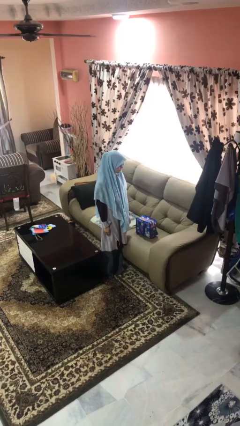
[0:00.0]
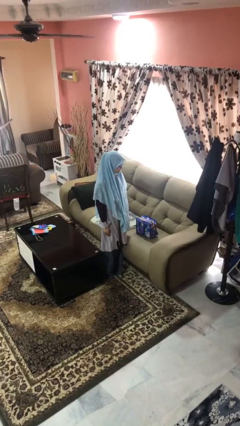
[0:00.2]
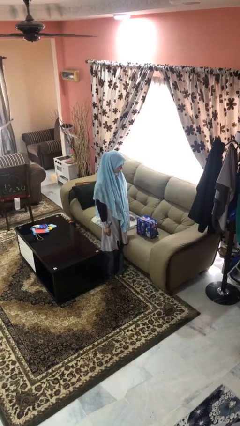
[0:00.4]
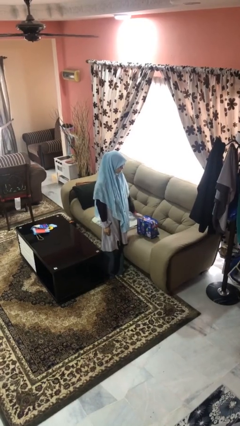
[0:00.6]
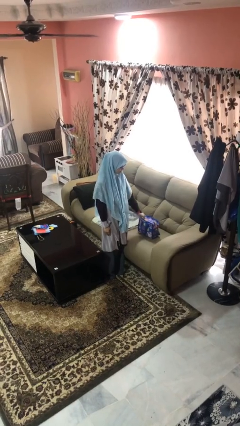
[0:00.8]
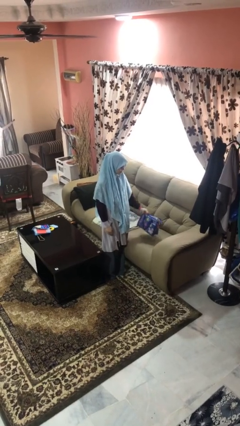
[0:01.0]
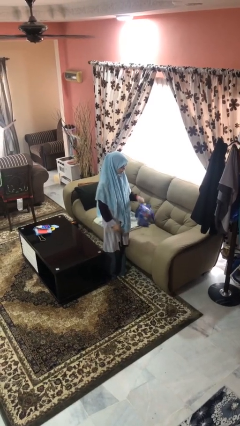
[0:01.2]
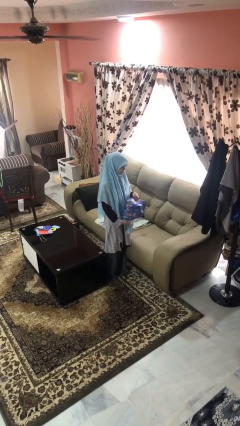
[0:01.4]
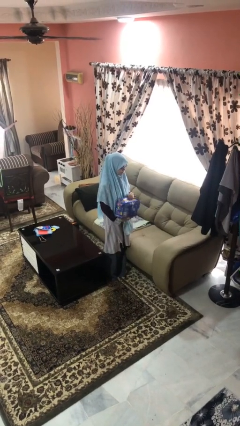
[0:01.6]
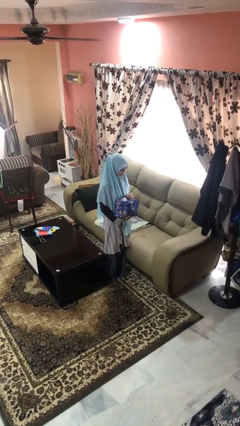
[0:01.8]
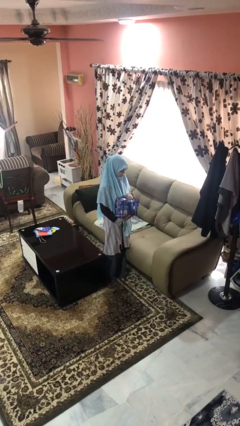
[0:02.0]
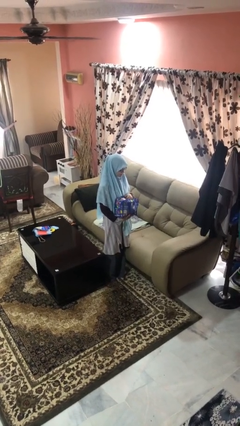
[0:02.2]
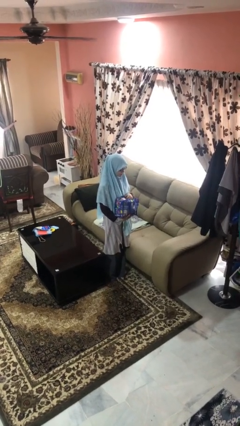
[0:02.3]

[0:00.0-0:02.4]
person picks up object from couch

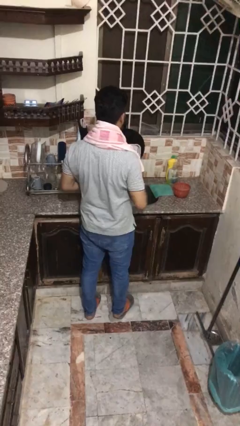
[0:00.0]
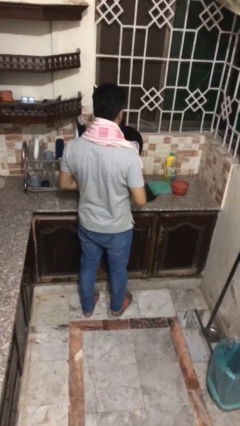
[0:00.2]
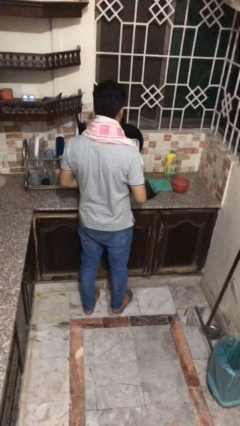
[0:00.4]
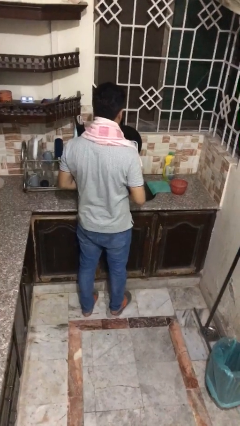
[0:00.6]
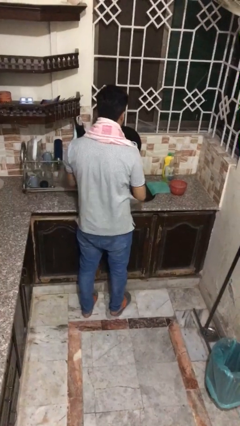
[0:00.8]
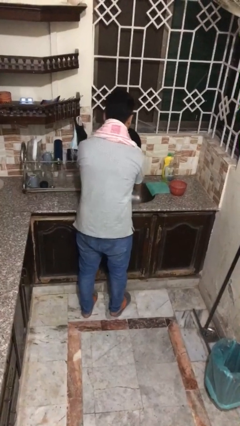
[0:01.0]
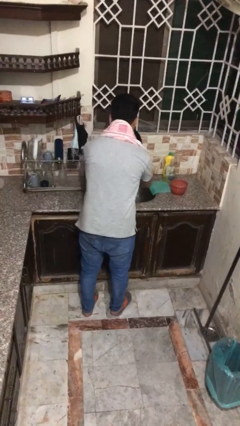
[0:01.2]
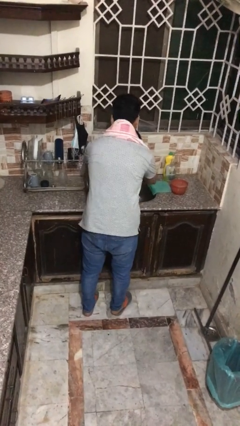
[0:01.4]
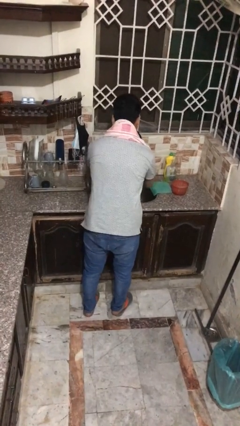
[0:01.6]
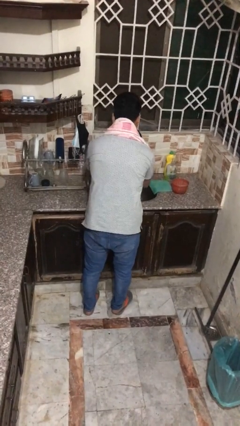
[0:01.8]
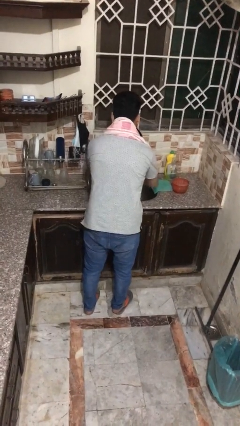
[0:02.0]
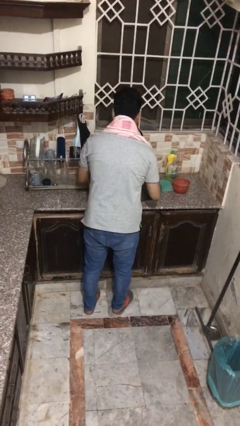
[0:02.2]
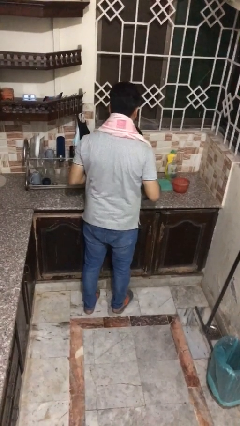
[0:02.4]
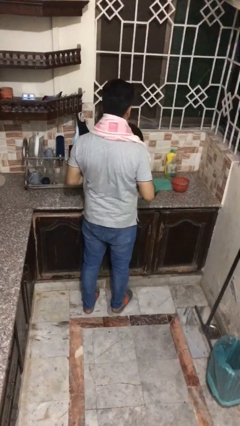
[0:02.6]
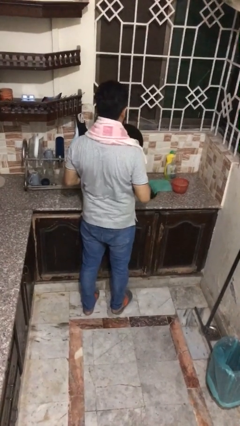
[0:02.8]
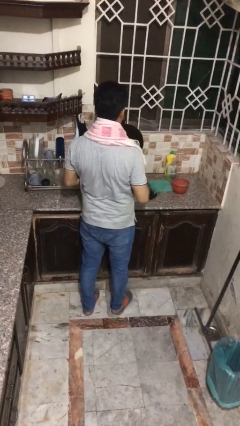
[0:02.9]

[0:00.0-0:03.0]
person washes face

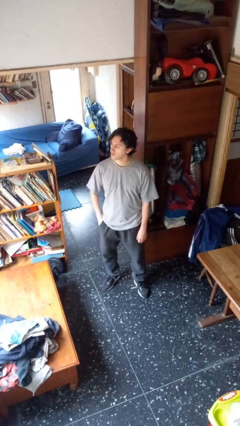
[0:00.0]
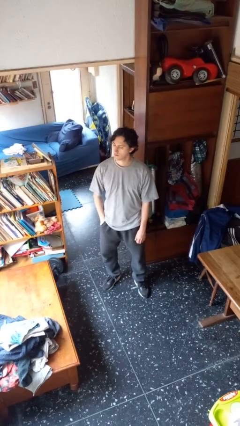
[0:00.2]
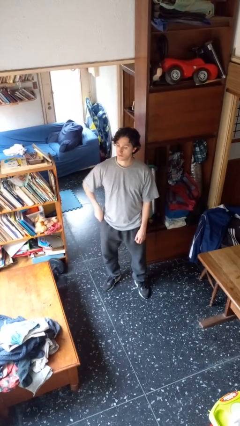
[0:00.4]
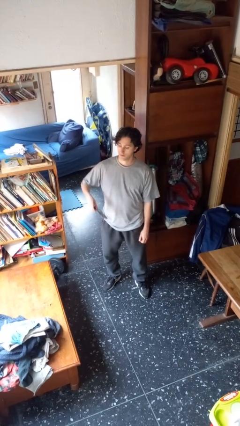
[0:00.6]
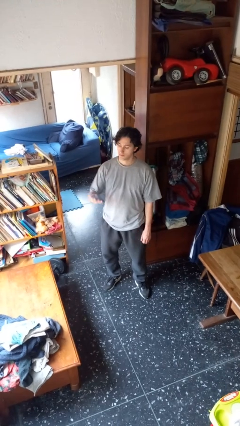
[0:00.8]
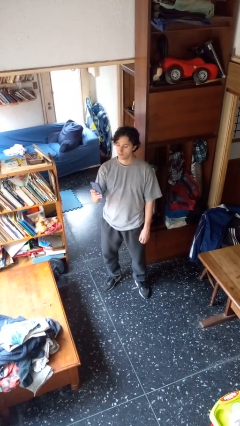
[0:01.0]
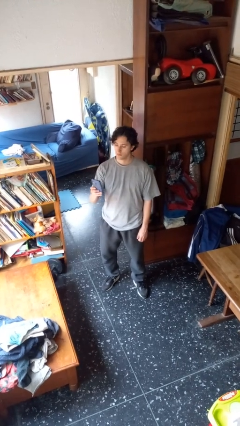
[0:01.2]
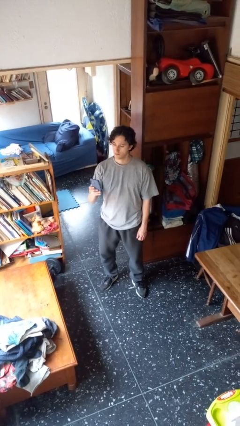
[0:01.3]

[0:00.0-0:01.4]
person takes phone from pocket

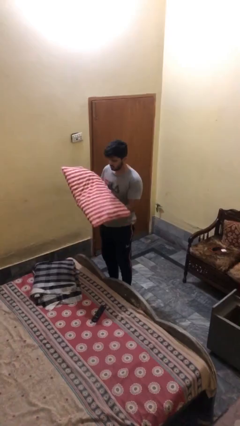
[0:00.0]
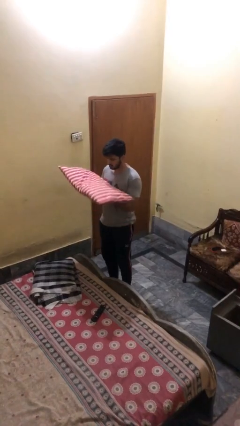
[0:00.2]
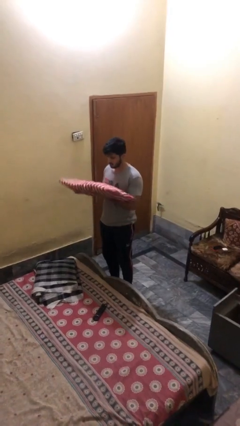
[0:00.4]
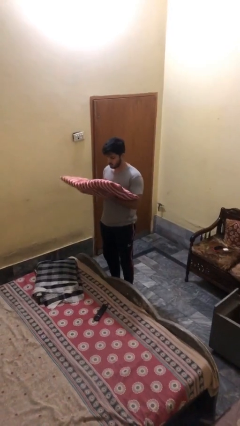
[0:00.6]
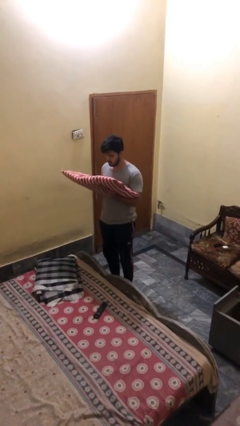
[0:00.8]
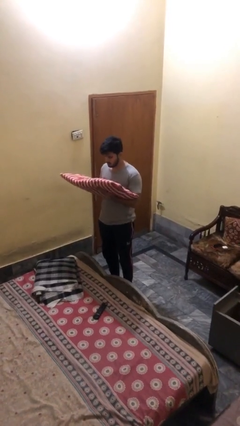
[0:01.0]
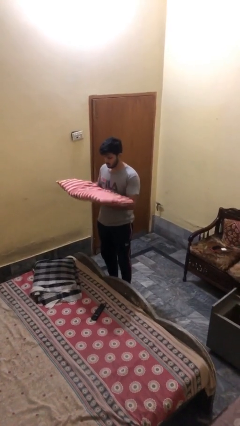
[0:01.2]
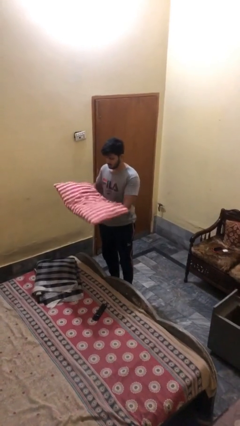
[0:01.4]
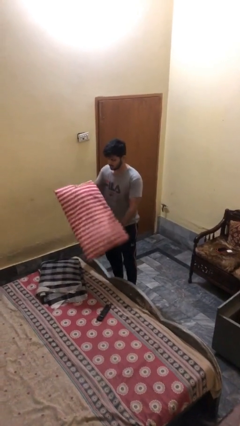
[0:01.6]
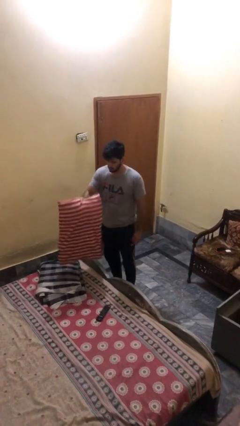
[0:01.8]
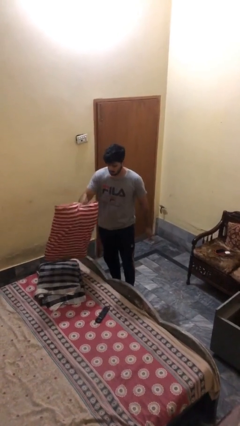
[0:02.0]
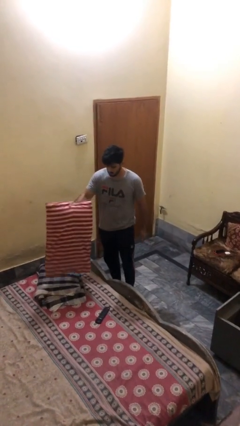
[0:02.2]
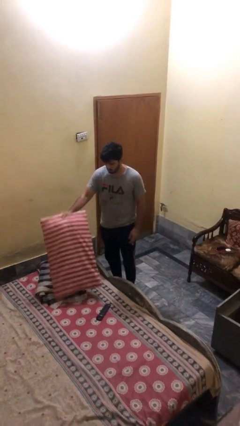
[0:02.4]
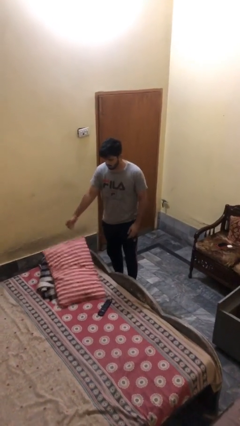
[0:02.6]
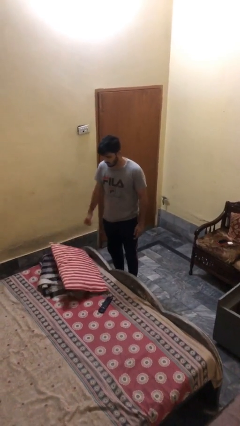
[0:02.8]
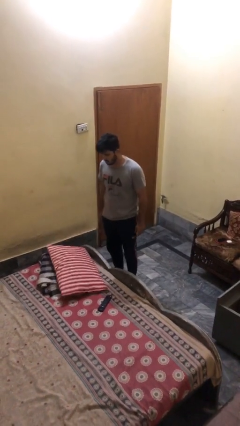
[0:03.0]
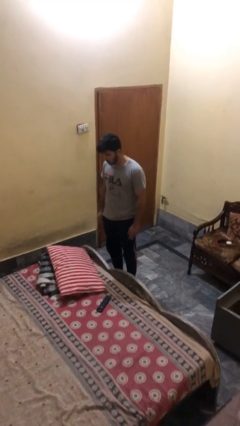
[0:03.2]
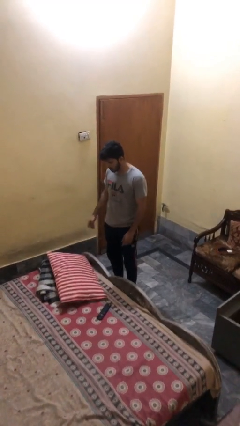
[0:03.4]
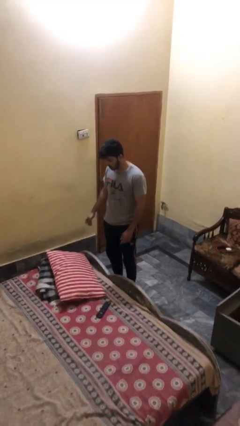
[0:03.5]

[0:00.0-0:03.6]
person puts down object on bed

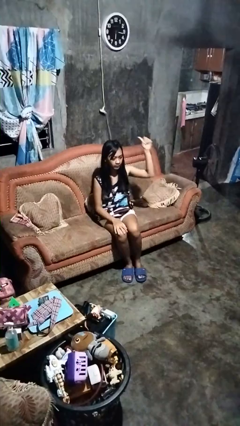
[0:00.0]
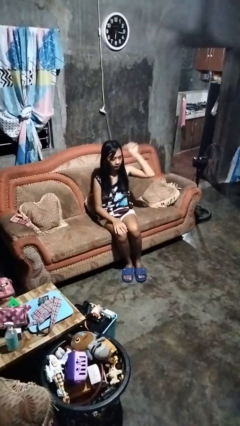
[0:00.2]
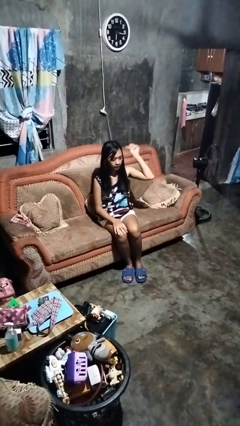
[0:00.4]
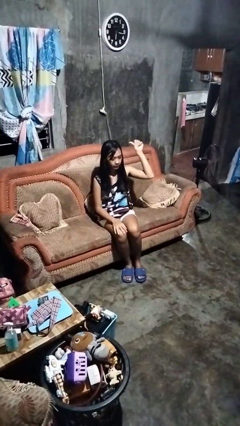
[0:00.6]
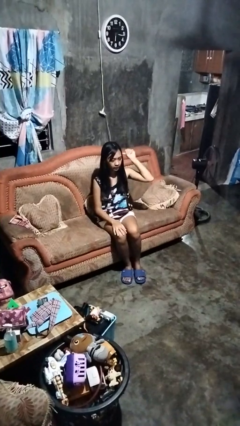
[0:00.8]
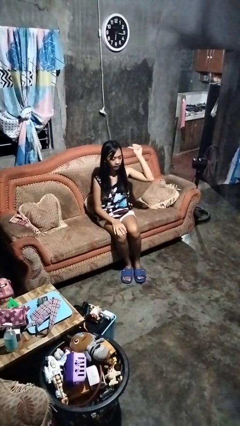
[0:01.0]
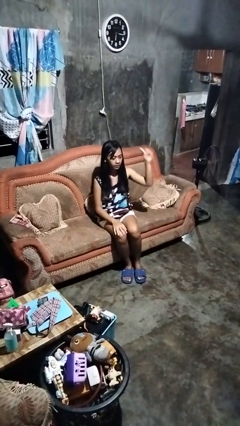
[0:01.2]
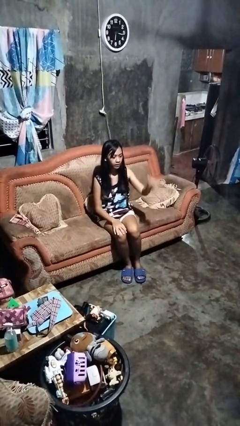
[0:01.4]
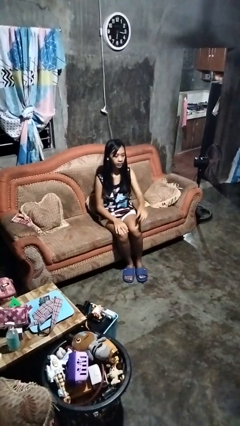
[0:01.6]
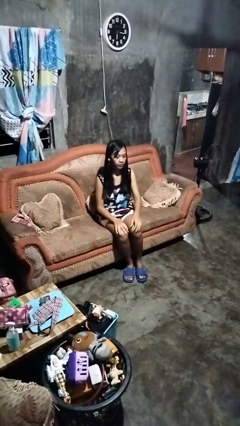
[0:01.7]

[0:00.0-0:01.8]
person gestures behind me

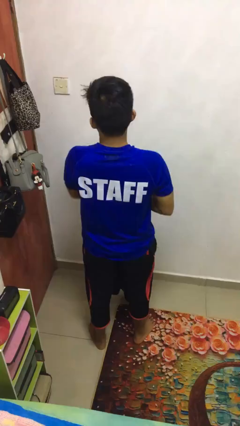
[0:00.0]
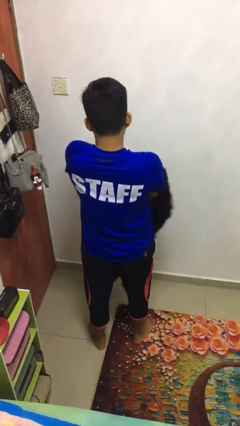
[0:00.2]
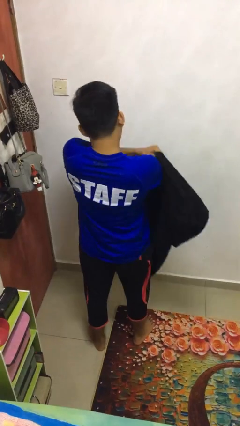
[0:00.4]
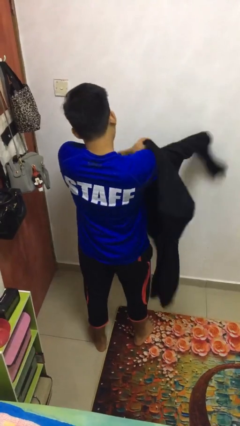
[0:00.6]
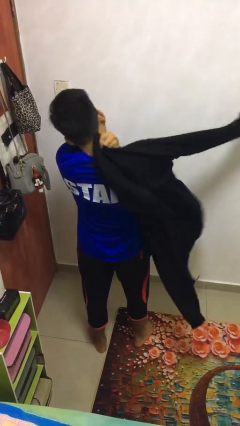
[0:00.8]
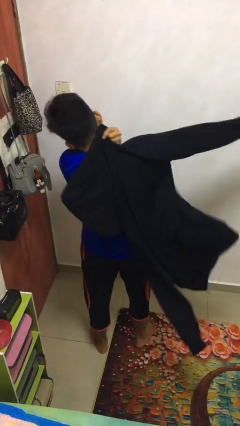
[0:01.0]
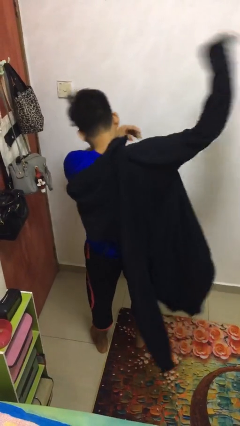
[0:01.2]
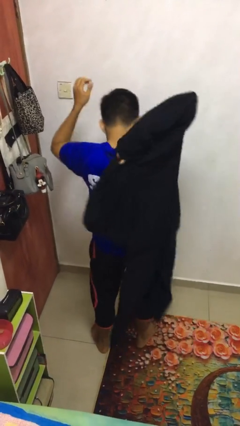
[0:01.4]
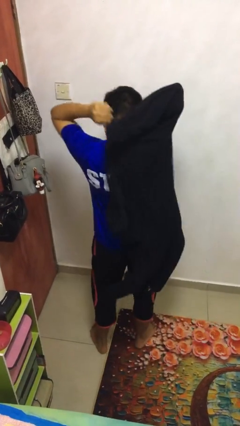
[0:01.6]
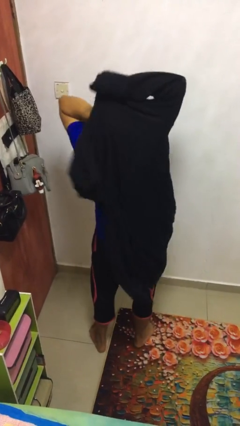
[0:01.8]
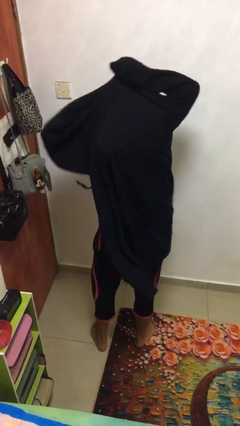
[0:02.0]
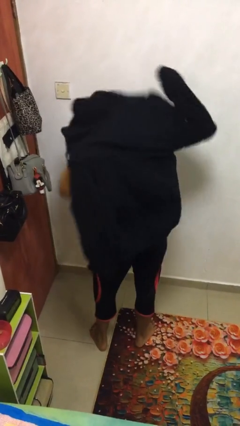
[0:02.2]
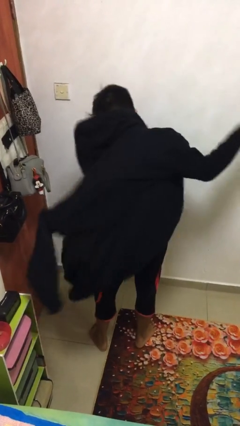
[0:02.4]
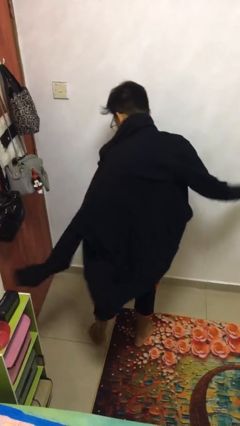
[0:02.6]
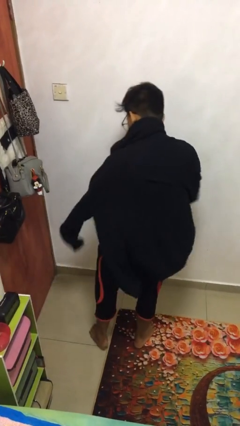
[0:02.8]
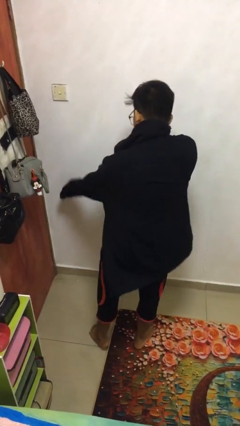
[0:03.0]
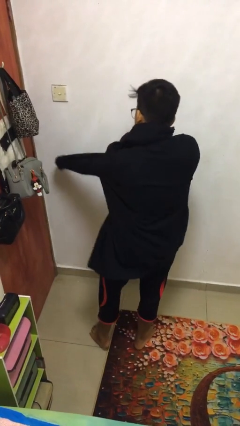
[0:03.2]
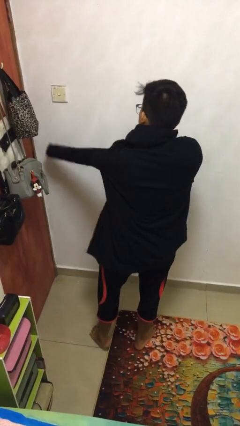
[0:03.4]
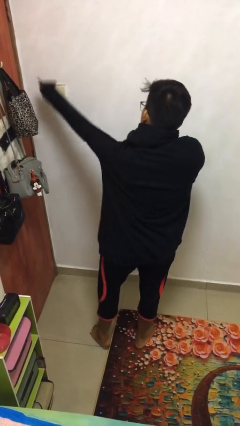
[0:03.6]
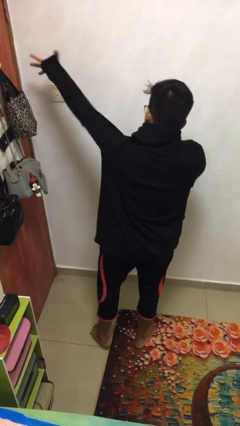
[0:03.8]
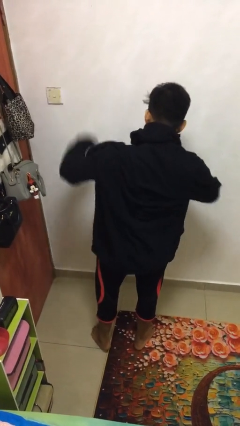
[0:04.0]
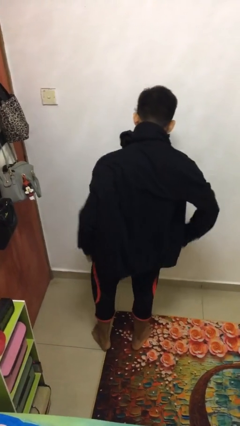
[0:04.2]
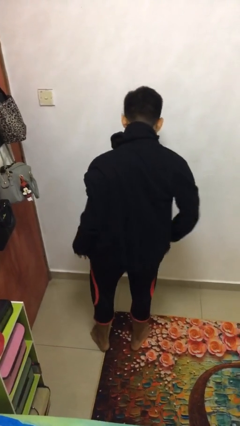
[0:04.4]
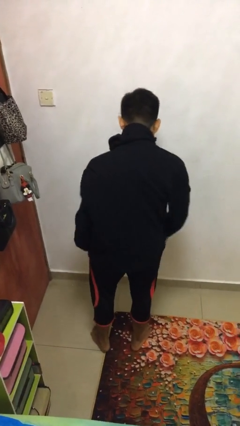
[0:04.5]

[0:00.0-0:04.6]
person puts on jacket

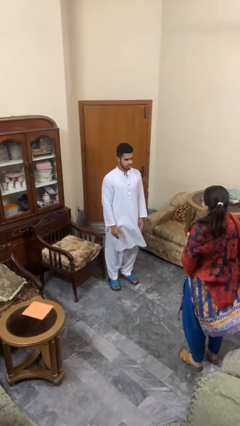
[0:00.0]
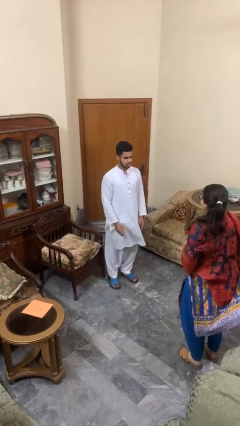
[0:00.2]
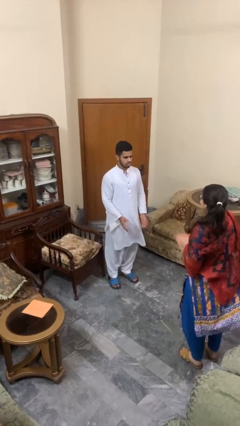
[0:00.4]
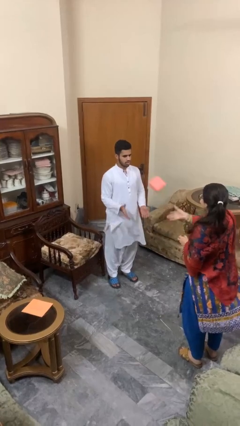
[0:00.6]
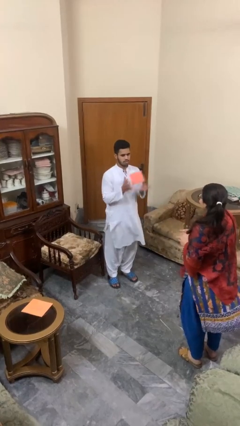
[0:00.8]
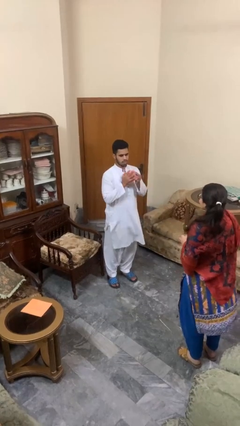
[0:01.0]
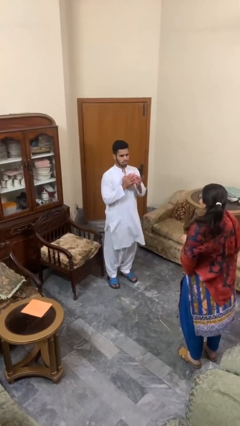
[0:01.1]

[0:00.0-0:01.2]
person catches object from person
